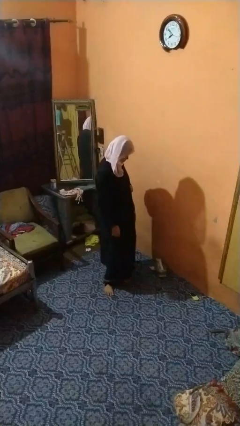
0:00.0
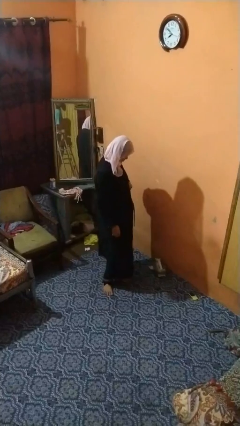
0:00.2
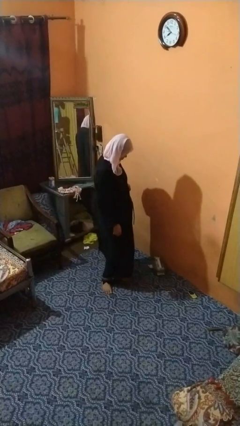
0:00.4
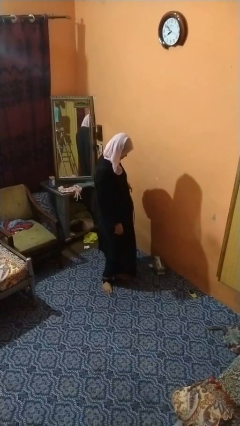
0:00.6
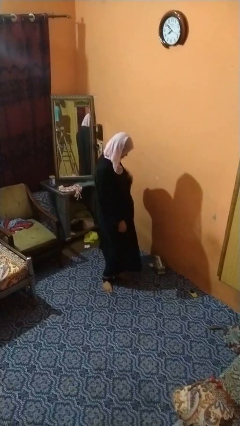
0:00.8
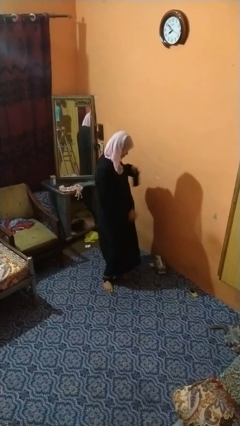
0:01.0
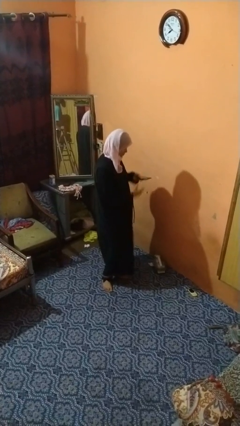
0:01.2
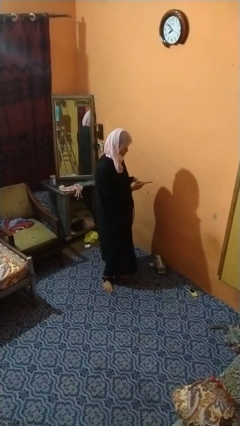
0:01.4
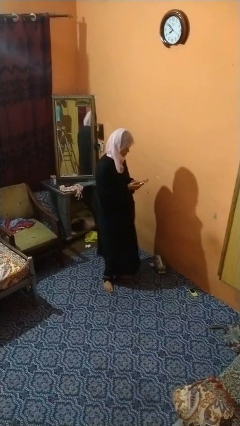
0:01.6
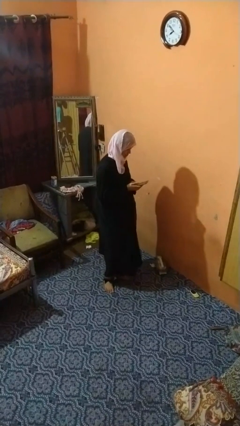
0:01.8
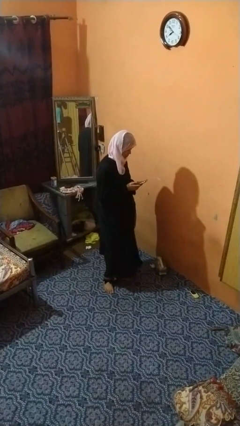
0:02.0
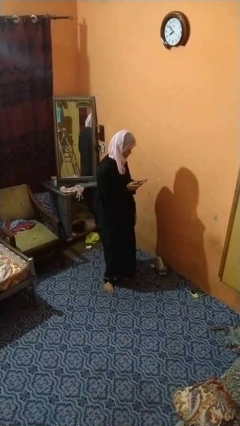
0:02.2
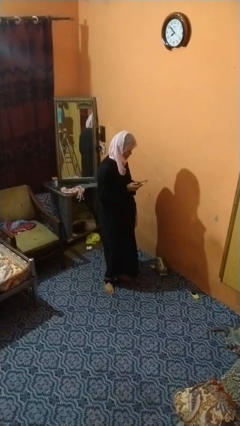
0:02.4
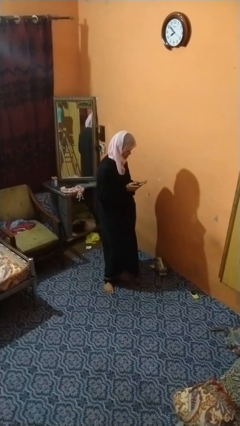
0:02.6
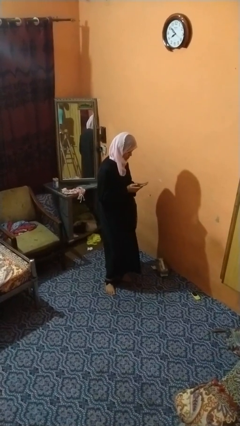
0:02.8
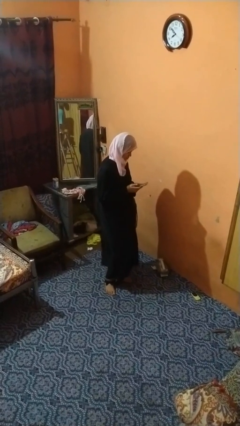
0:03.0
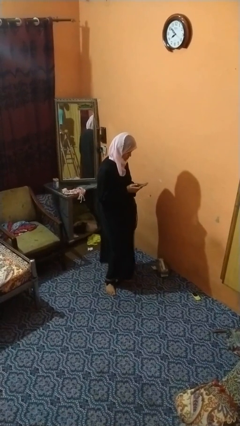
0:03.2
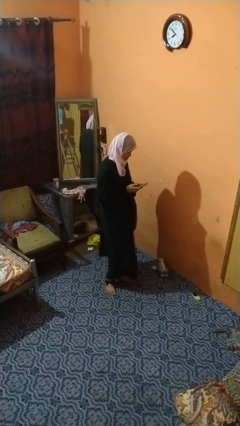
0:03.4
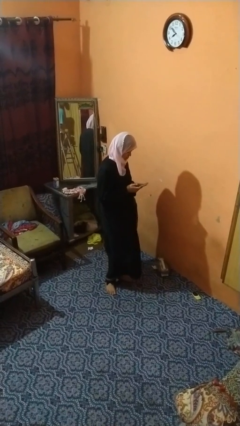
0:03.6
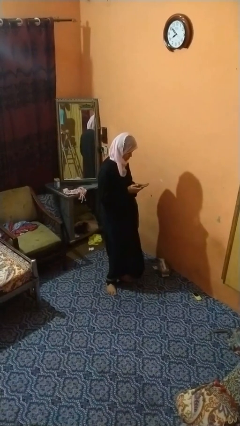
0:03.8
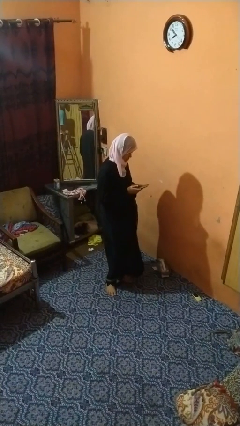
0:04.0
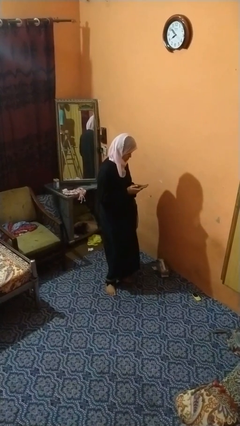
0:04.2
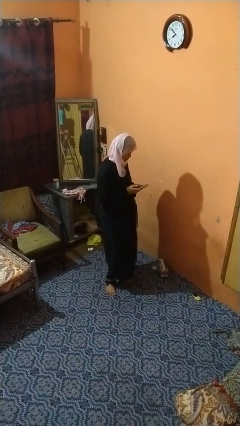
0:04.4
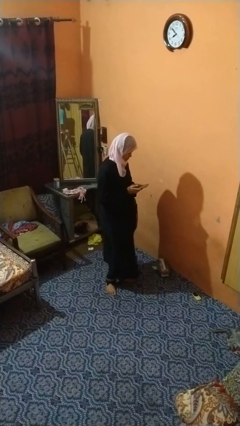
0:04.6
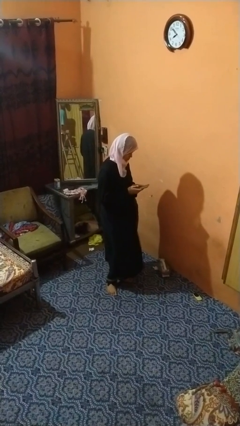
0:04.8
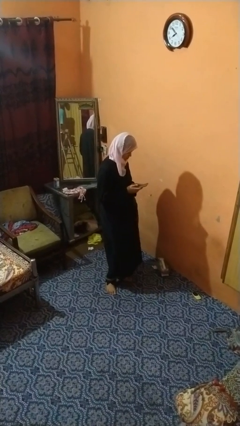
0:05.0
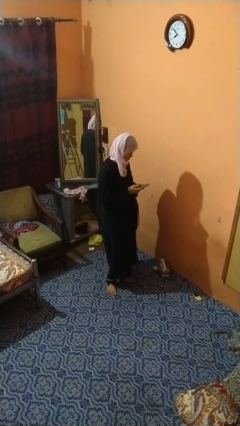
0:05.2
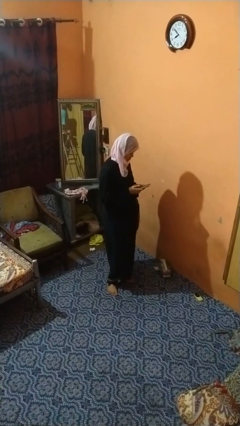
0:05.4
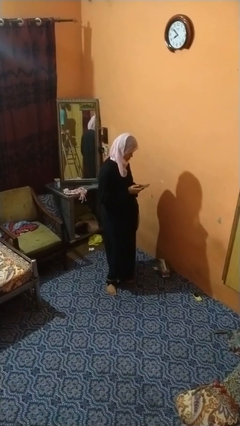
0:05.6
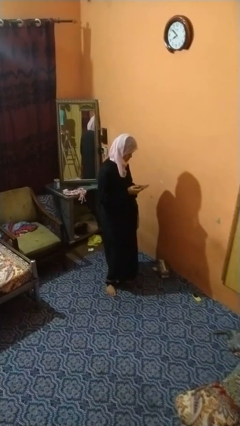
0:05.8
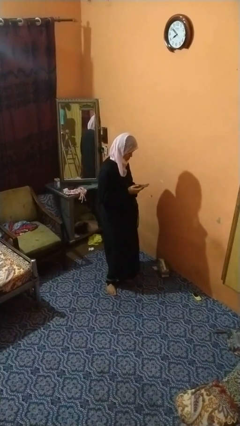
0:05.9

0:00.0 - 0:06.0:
person takes phone from pocket

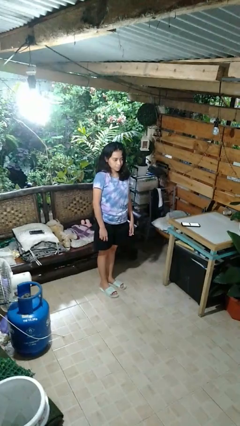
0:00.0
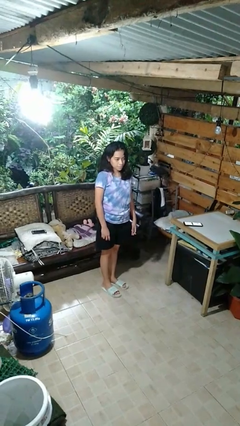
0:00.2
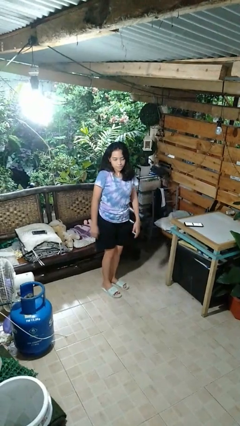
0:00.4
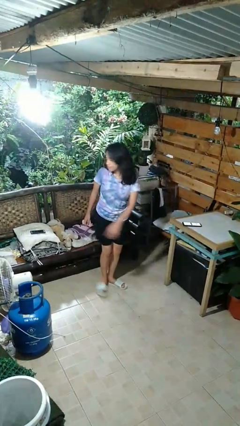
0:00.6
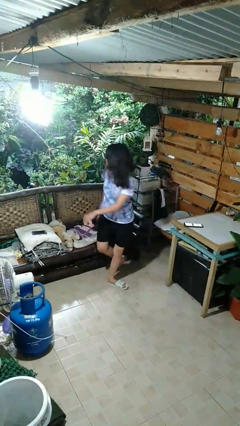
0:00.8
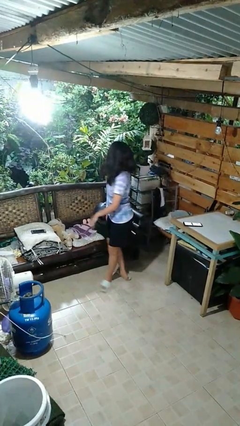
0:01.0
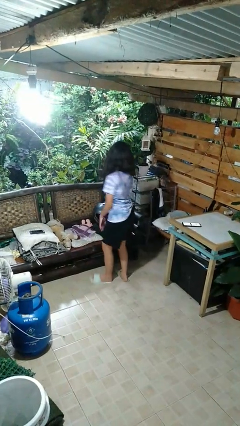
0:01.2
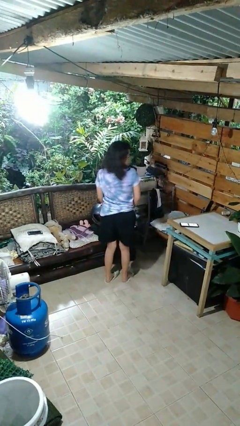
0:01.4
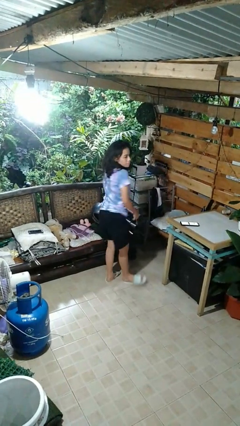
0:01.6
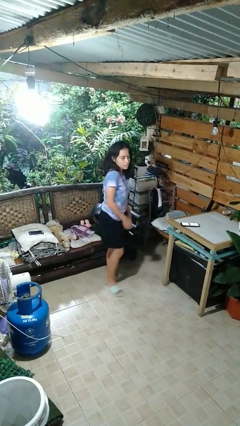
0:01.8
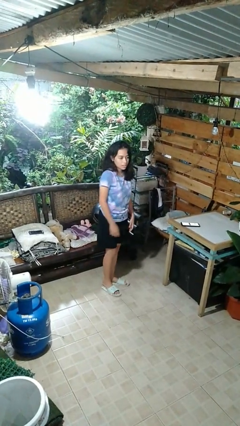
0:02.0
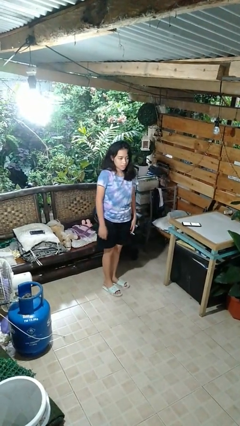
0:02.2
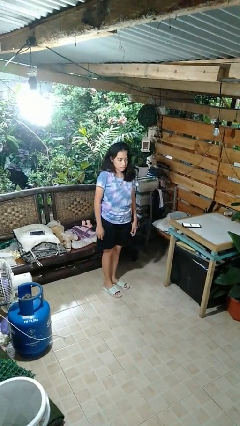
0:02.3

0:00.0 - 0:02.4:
person twirls

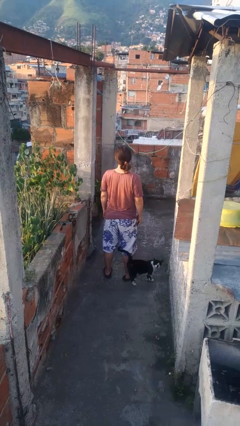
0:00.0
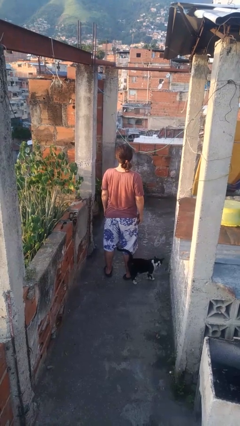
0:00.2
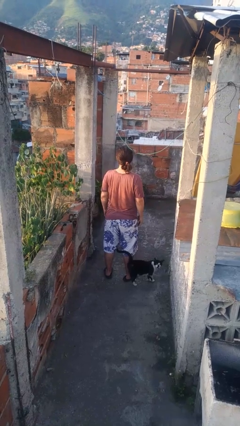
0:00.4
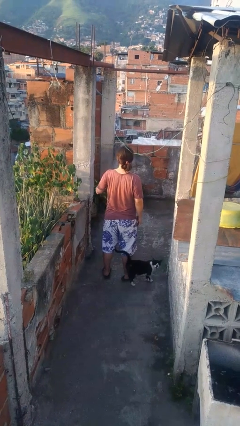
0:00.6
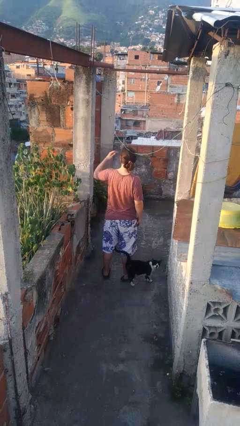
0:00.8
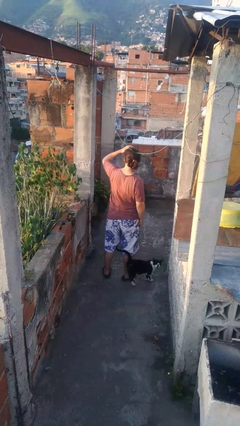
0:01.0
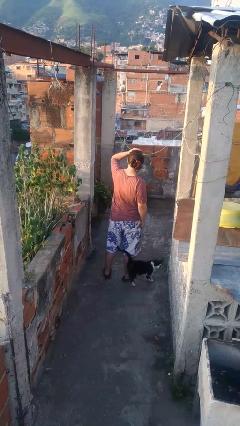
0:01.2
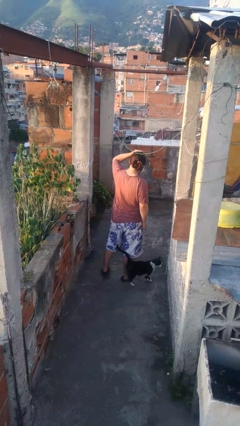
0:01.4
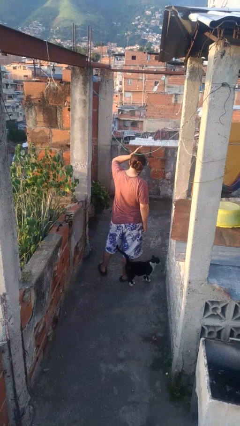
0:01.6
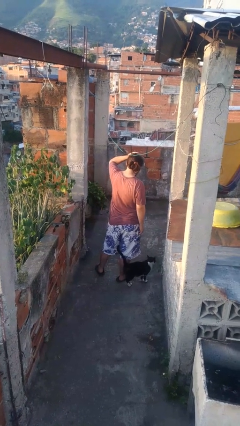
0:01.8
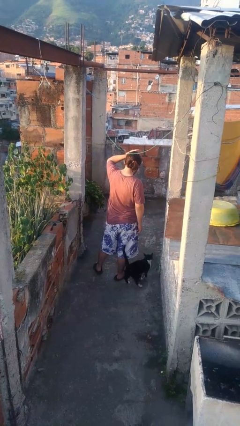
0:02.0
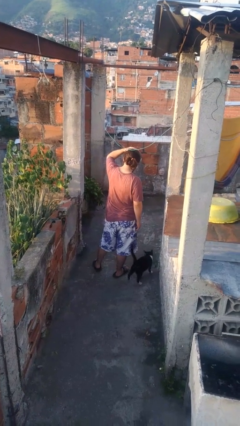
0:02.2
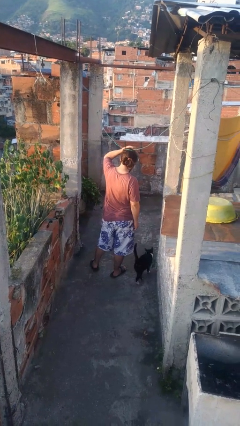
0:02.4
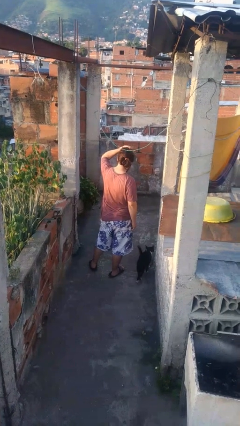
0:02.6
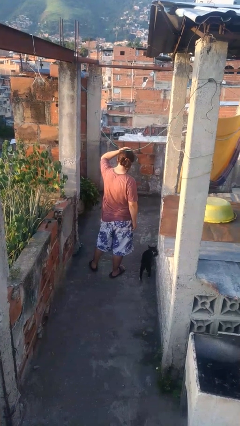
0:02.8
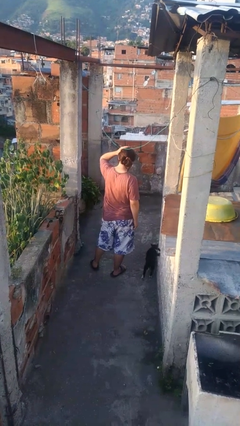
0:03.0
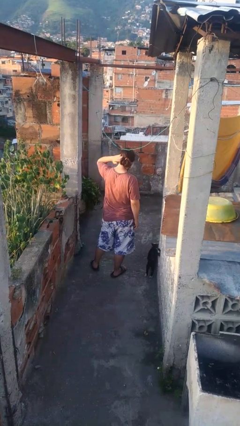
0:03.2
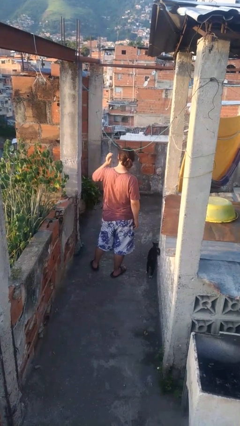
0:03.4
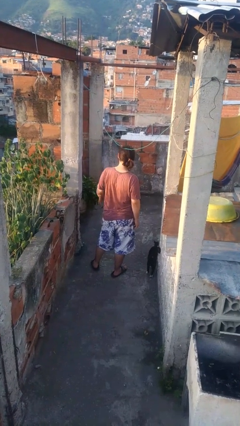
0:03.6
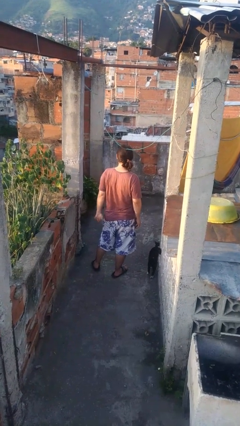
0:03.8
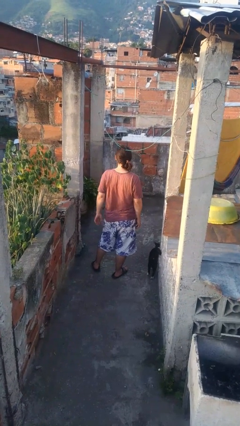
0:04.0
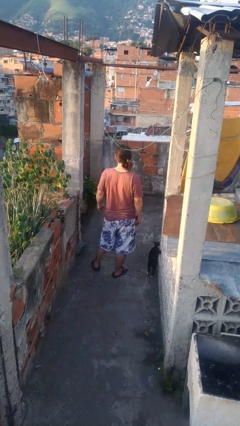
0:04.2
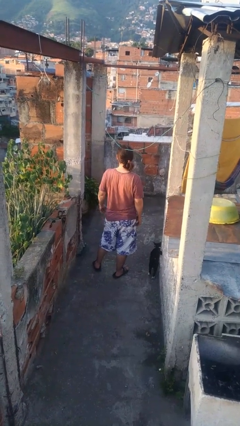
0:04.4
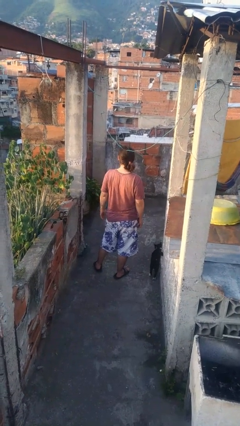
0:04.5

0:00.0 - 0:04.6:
person pats head

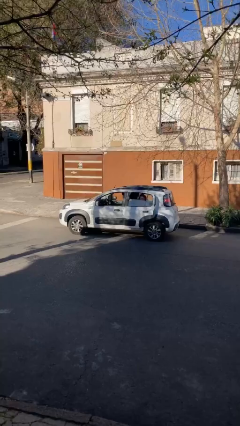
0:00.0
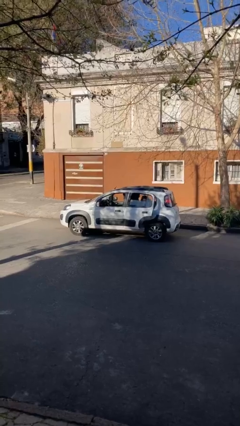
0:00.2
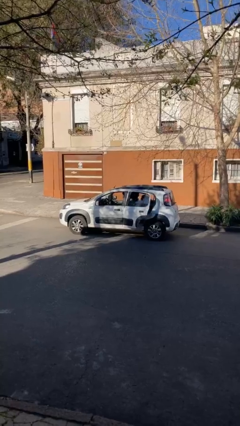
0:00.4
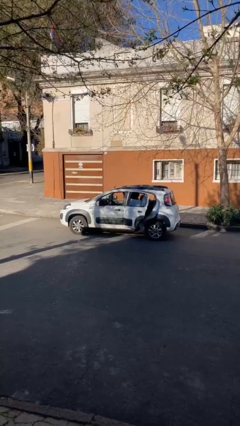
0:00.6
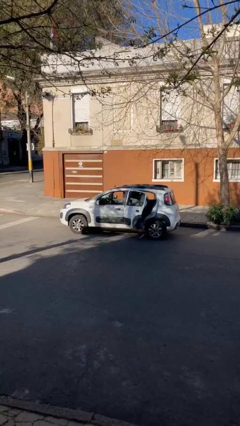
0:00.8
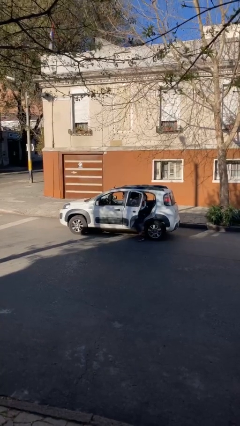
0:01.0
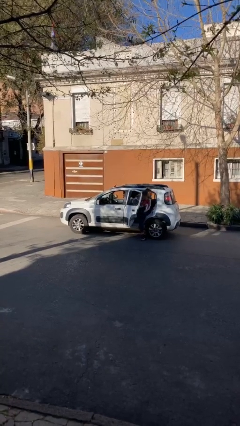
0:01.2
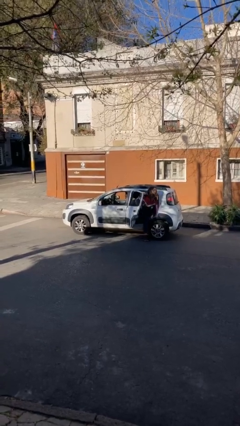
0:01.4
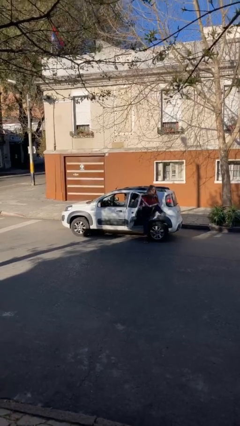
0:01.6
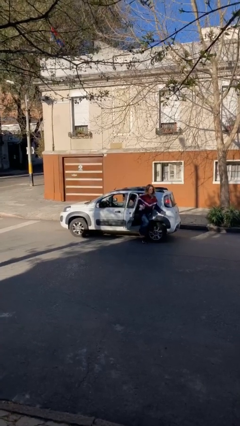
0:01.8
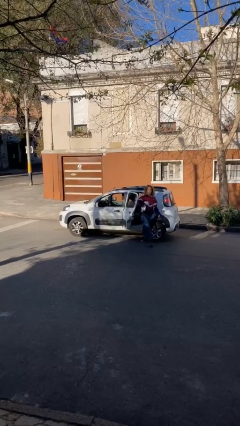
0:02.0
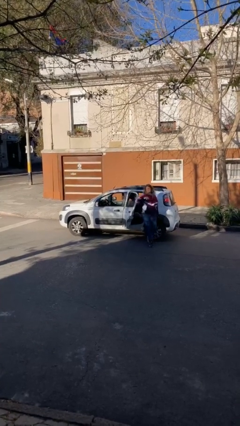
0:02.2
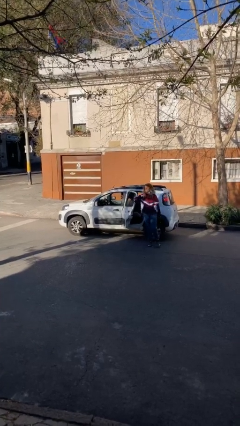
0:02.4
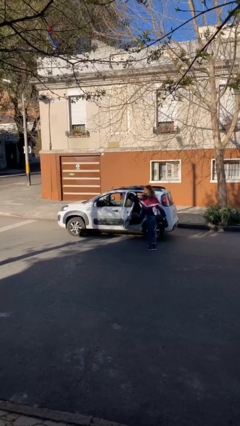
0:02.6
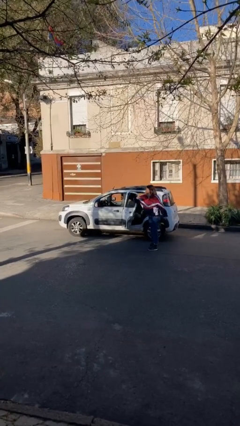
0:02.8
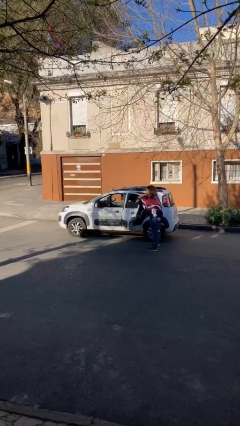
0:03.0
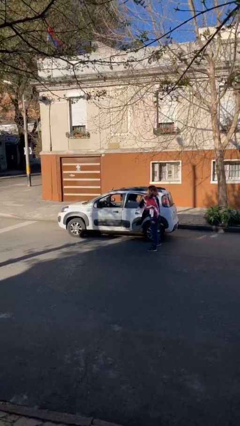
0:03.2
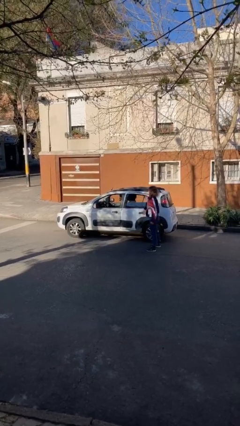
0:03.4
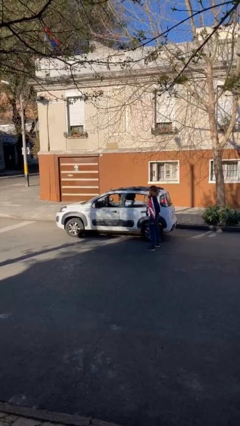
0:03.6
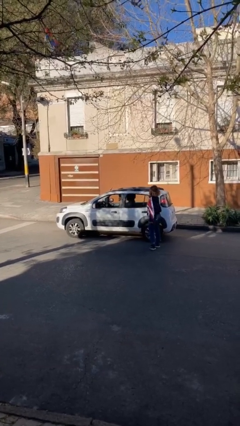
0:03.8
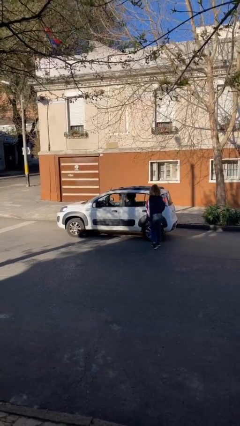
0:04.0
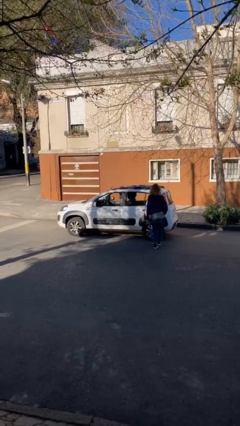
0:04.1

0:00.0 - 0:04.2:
car drops off person

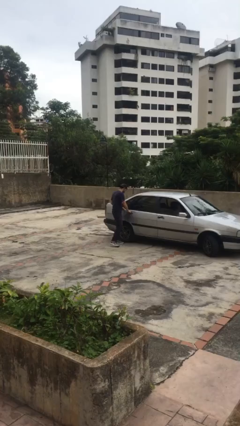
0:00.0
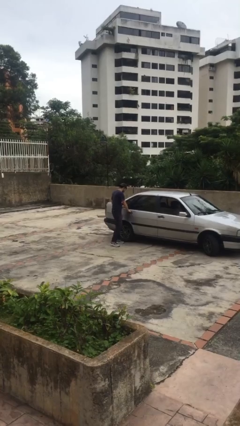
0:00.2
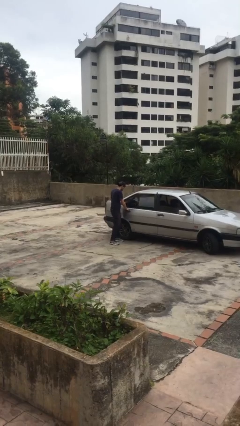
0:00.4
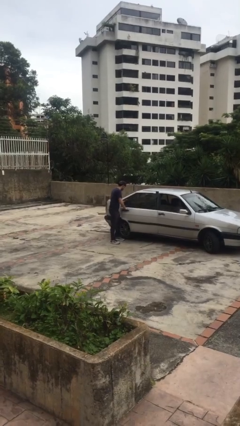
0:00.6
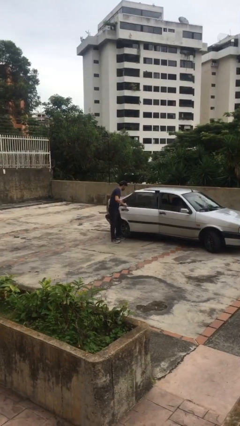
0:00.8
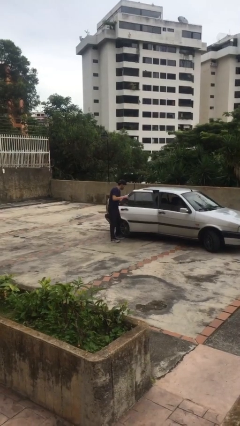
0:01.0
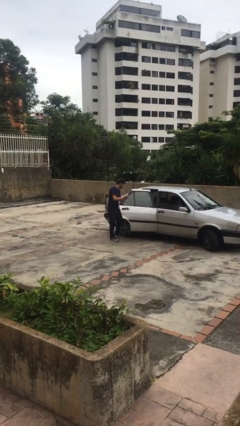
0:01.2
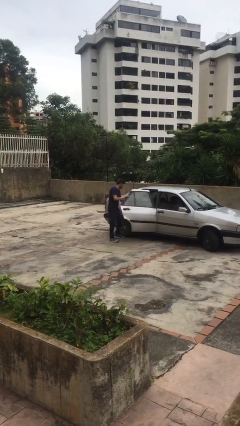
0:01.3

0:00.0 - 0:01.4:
person opens car door
